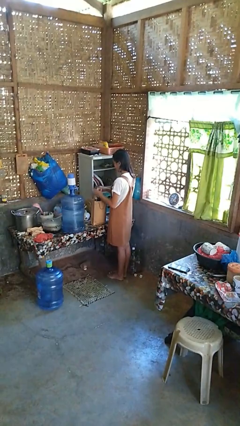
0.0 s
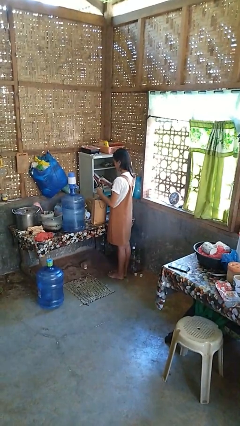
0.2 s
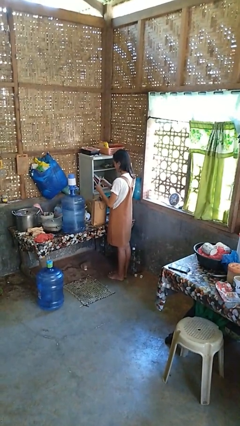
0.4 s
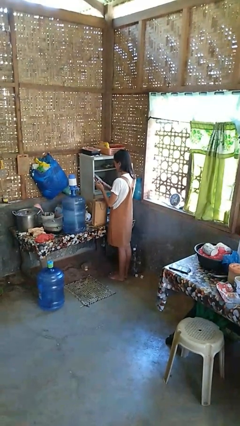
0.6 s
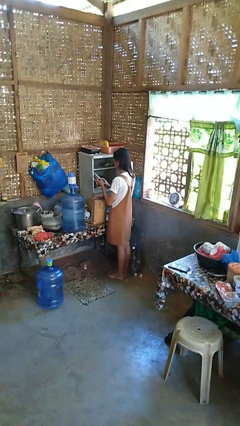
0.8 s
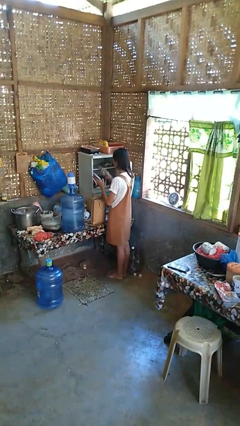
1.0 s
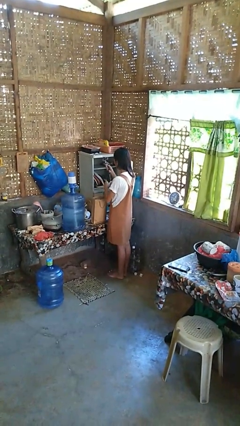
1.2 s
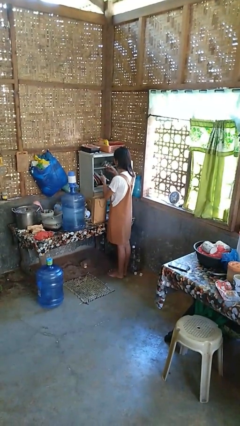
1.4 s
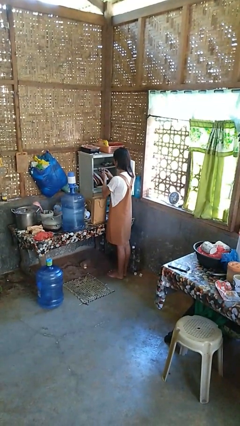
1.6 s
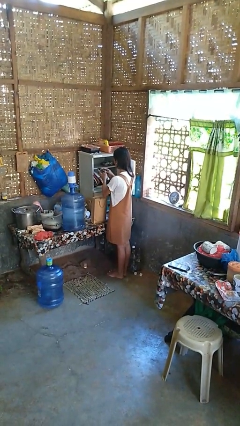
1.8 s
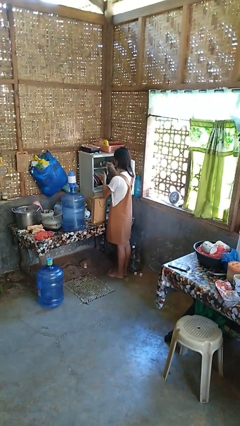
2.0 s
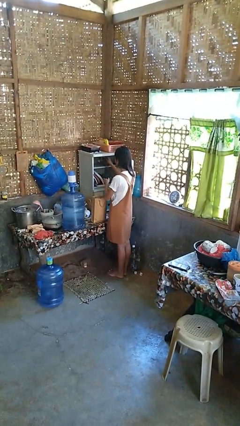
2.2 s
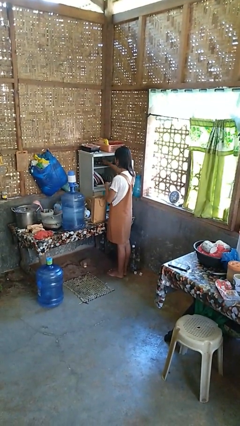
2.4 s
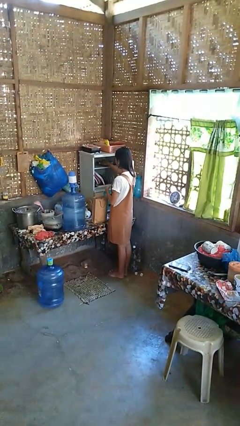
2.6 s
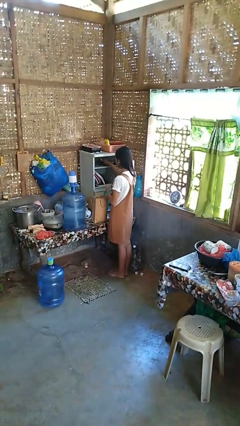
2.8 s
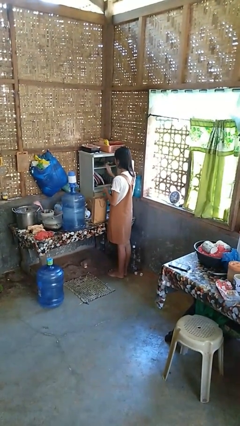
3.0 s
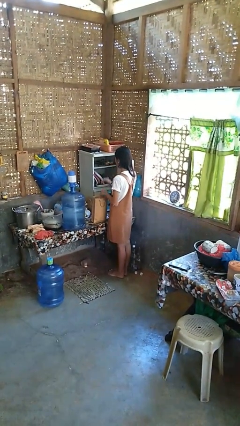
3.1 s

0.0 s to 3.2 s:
person loads groceries into cabinet

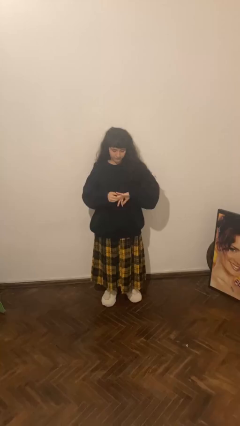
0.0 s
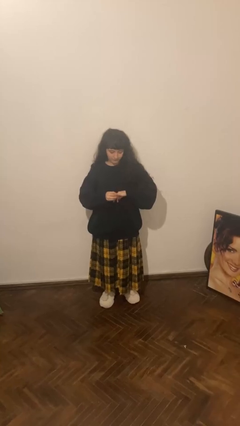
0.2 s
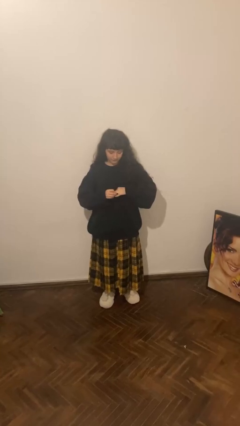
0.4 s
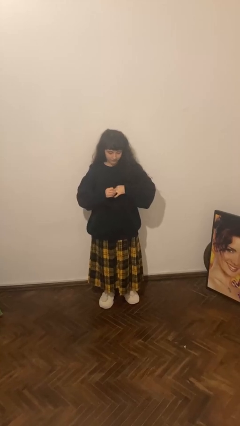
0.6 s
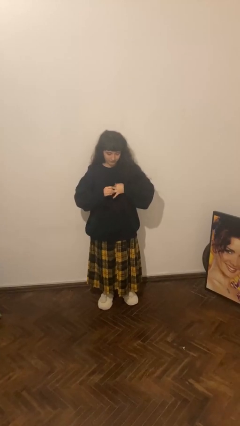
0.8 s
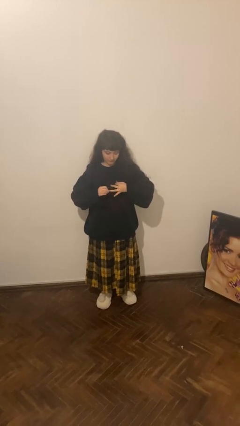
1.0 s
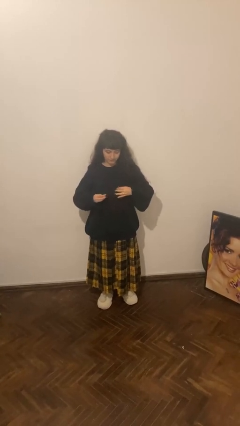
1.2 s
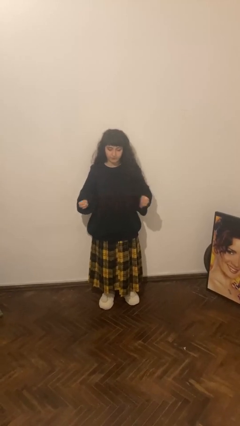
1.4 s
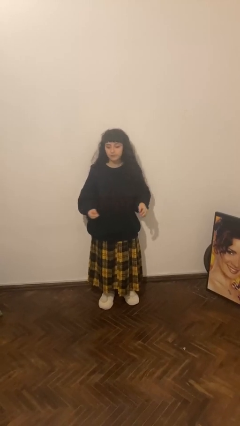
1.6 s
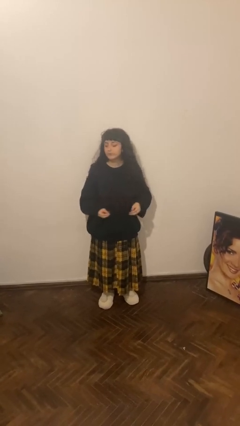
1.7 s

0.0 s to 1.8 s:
person takes off ring

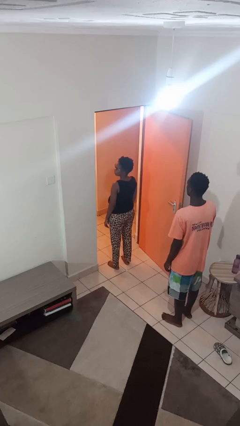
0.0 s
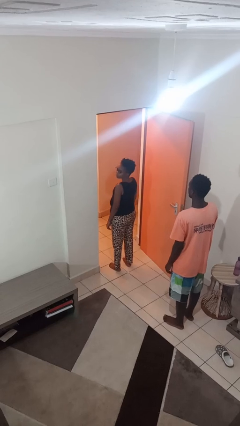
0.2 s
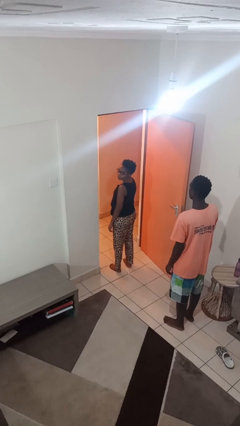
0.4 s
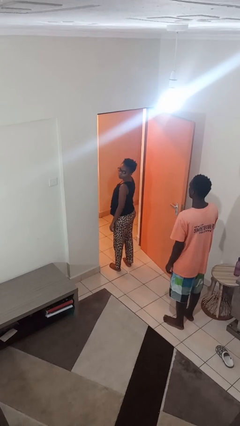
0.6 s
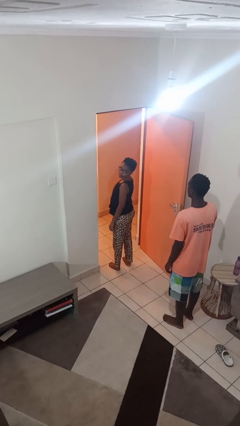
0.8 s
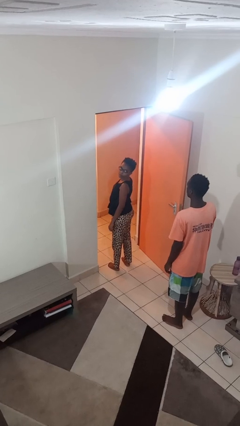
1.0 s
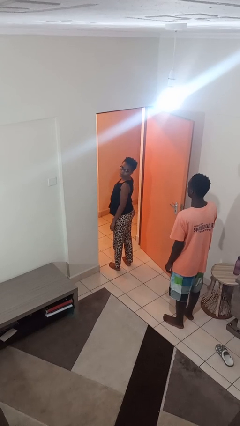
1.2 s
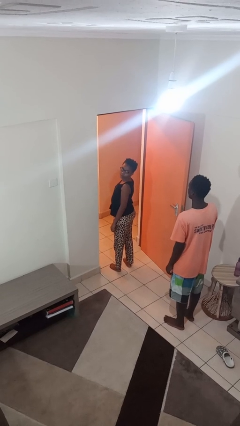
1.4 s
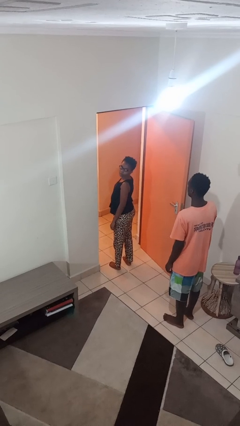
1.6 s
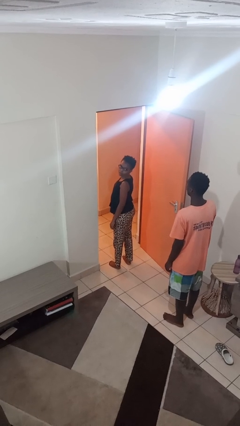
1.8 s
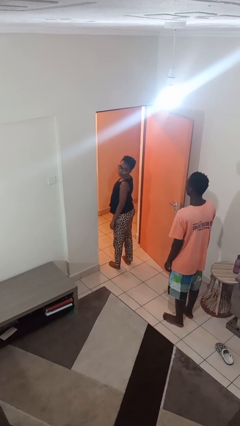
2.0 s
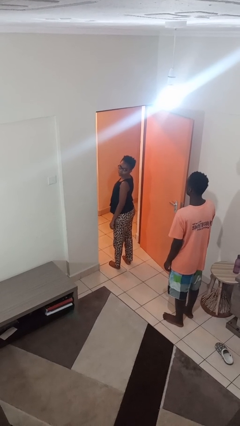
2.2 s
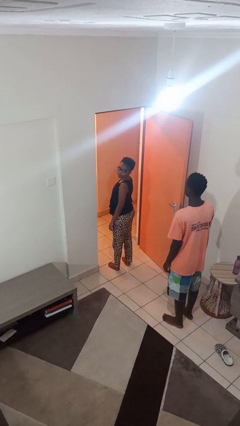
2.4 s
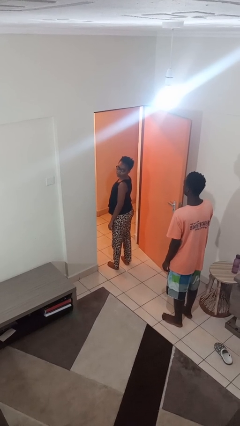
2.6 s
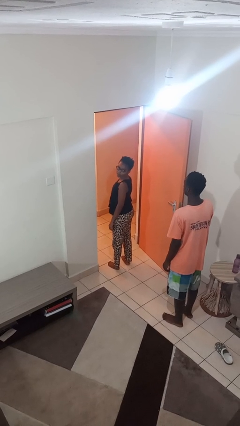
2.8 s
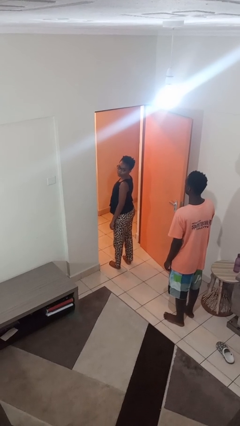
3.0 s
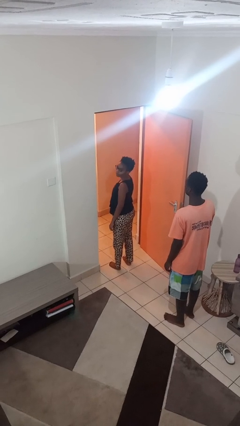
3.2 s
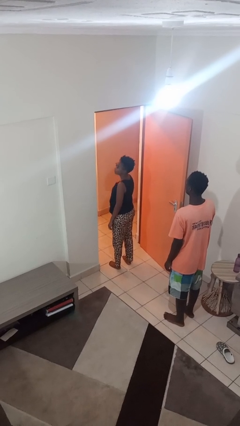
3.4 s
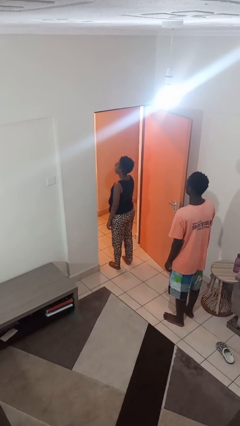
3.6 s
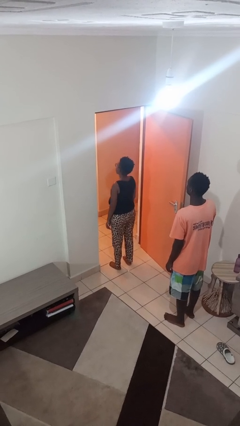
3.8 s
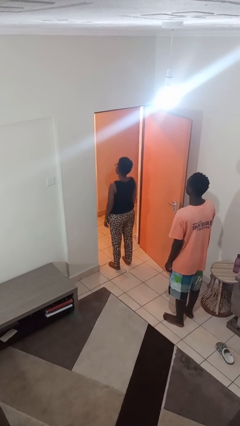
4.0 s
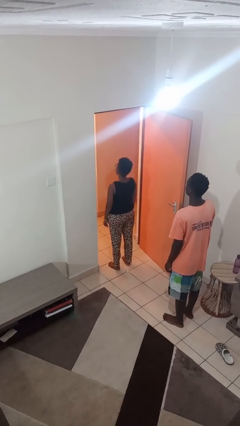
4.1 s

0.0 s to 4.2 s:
person looks over shoulder

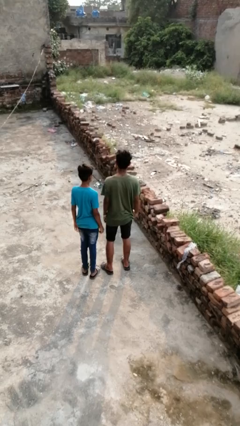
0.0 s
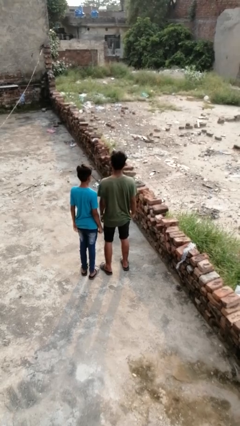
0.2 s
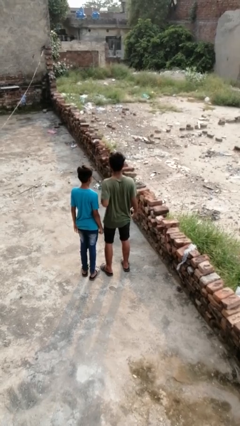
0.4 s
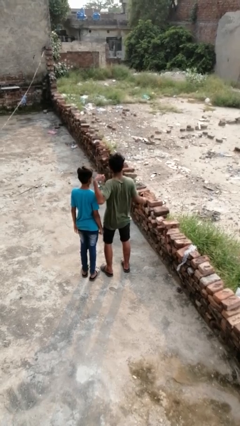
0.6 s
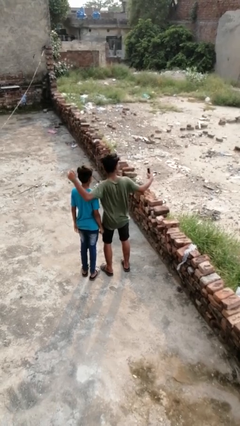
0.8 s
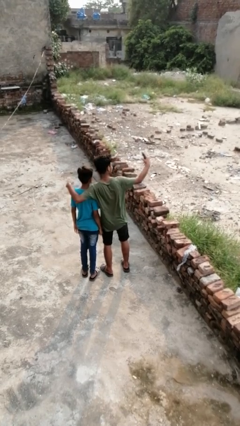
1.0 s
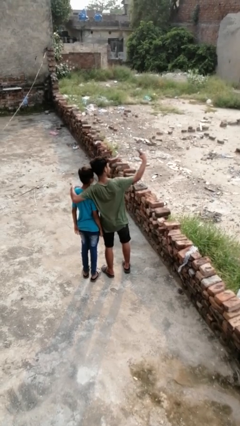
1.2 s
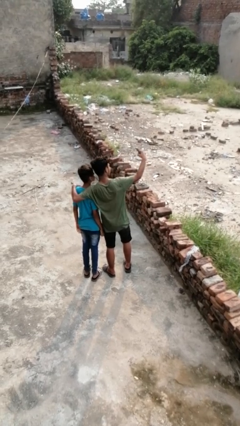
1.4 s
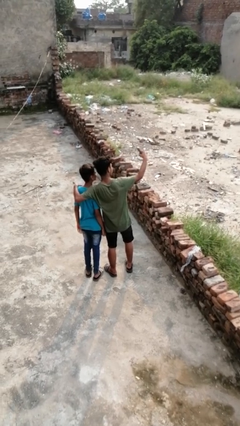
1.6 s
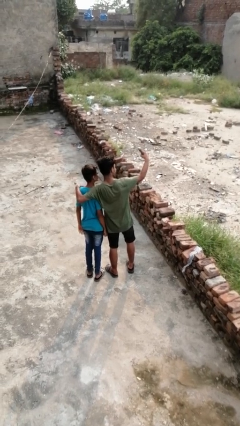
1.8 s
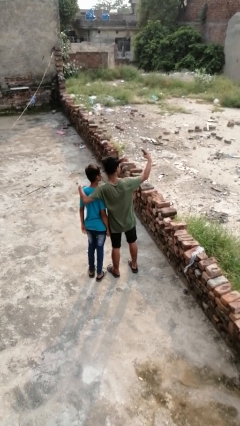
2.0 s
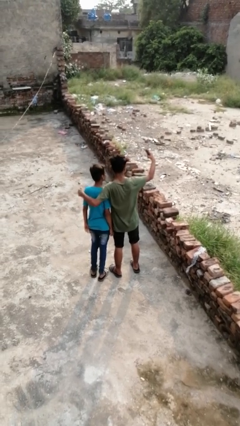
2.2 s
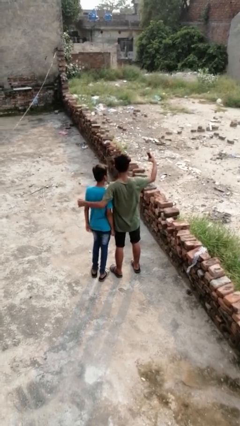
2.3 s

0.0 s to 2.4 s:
person takes selfie with person

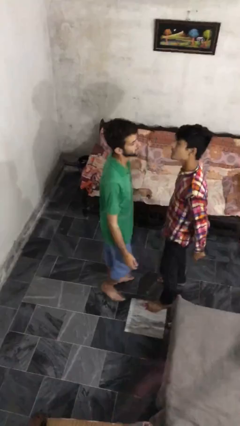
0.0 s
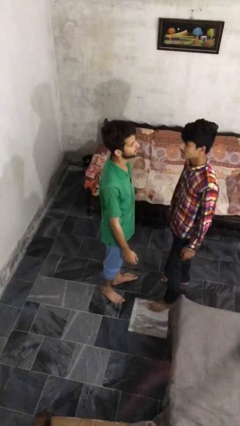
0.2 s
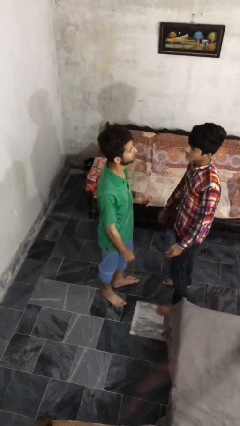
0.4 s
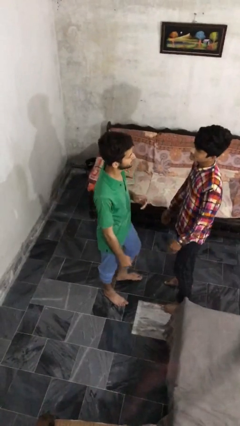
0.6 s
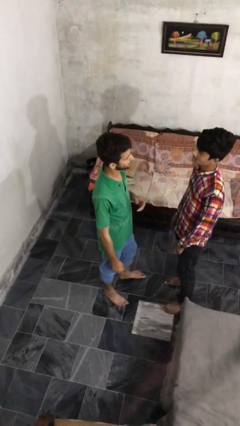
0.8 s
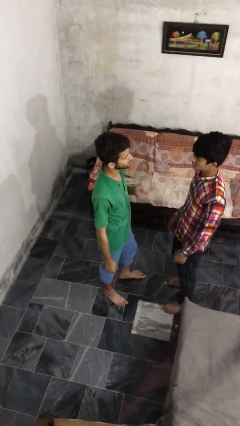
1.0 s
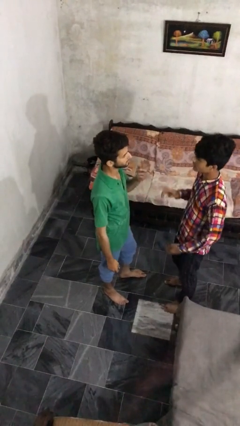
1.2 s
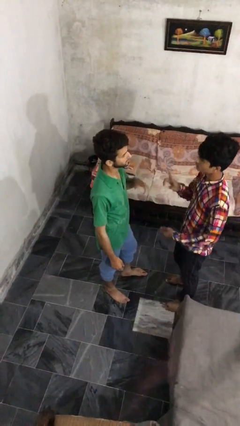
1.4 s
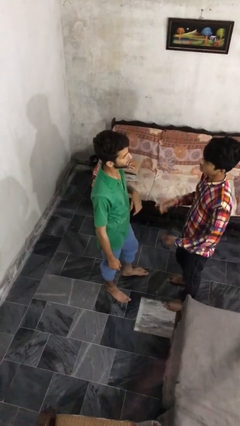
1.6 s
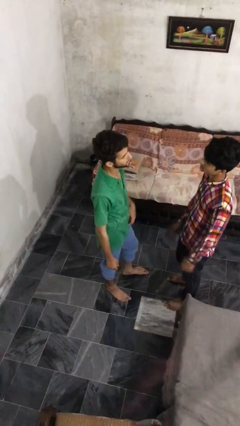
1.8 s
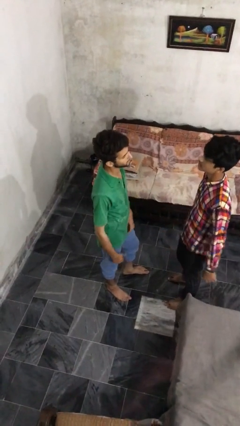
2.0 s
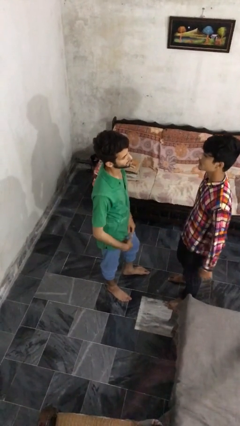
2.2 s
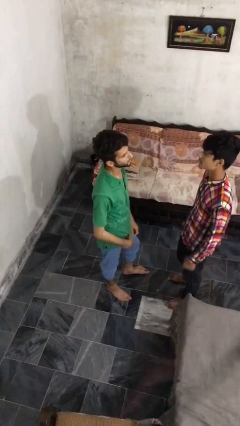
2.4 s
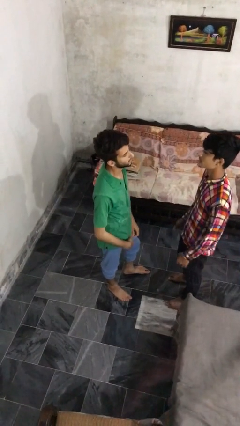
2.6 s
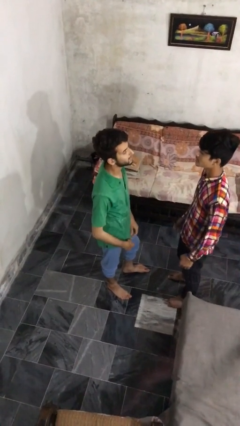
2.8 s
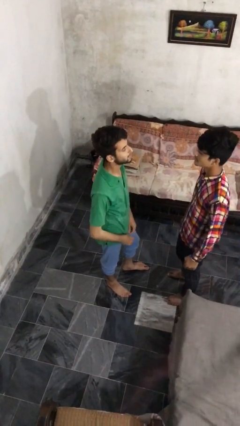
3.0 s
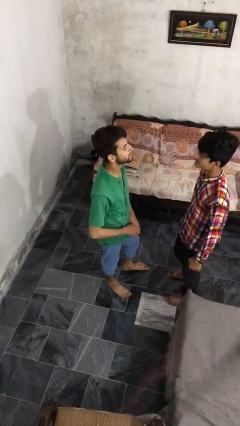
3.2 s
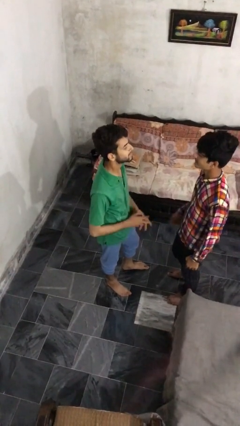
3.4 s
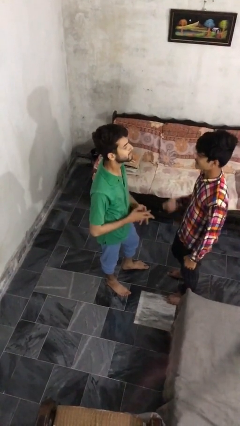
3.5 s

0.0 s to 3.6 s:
person talks to person

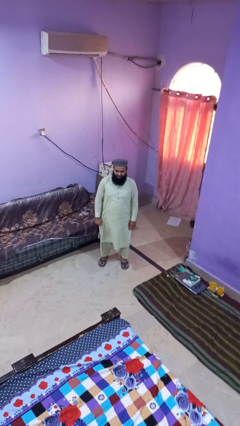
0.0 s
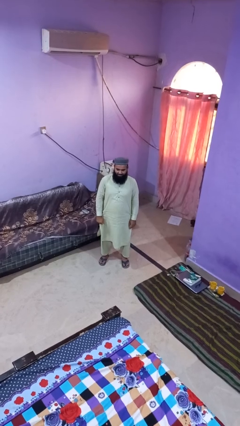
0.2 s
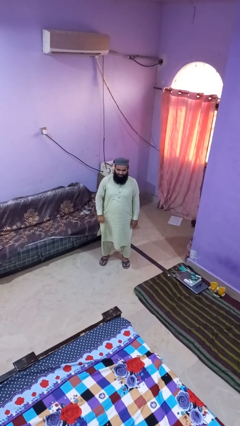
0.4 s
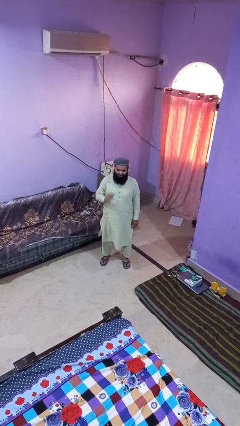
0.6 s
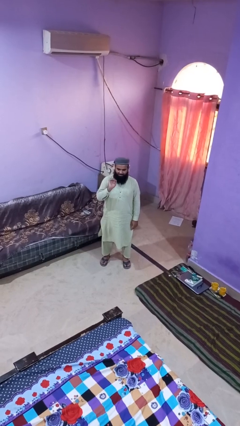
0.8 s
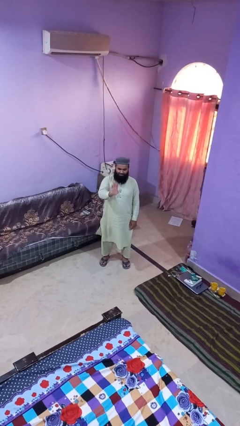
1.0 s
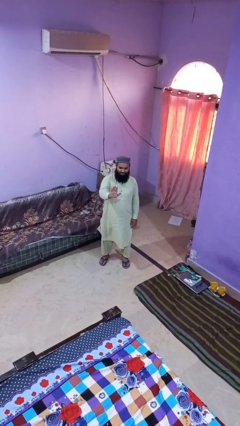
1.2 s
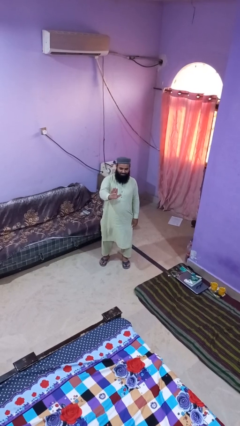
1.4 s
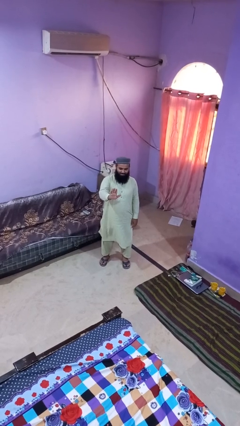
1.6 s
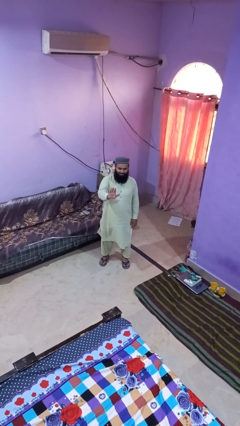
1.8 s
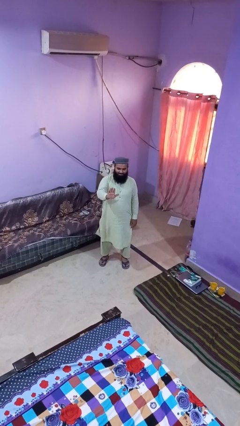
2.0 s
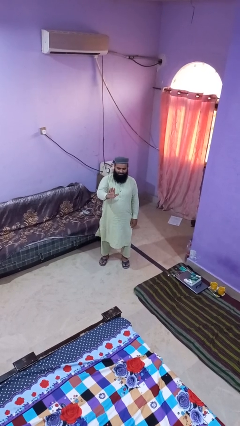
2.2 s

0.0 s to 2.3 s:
person gestures stop

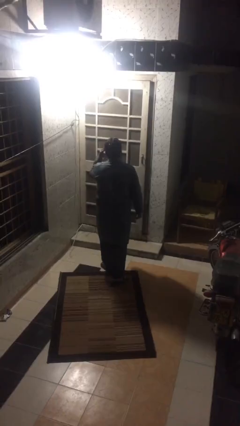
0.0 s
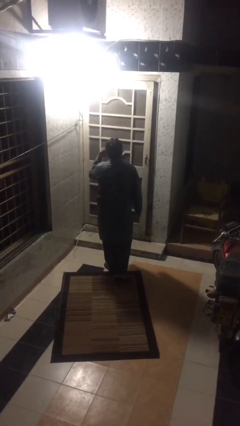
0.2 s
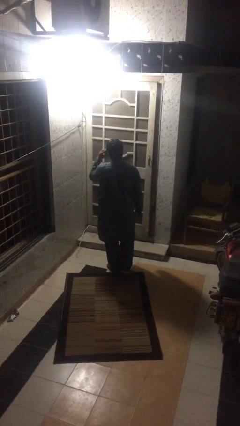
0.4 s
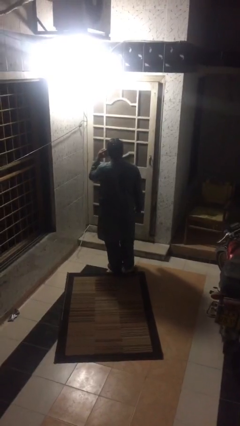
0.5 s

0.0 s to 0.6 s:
person talks on phone
